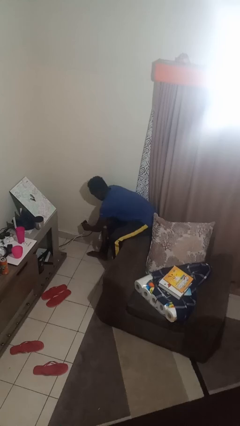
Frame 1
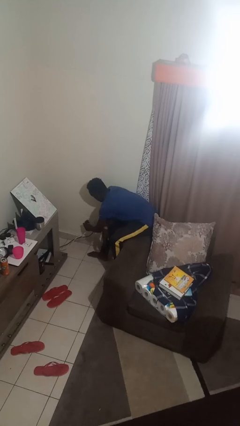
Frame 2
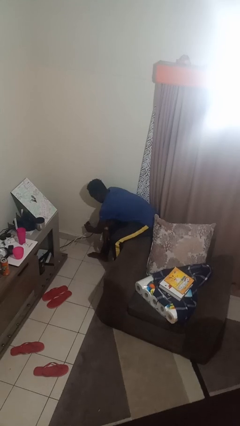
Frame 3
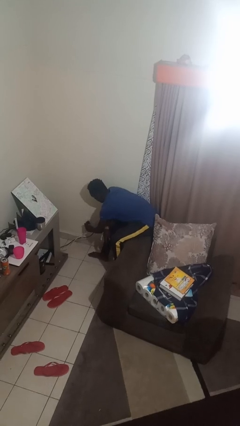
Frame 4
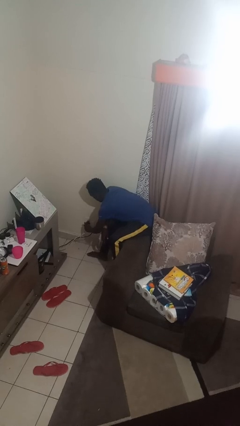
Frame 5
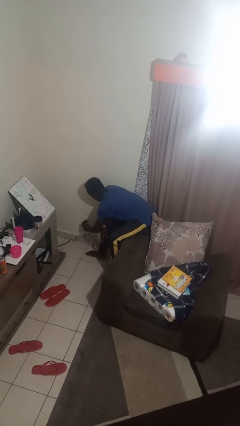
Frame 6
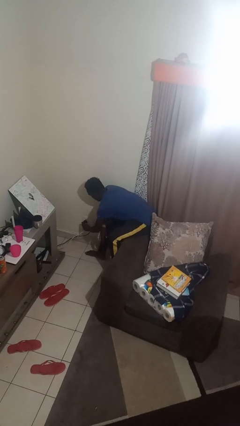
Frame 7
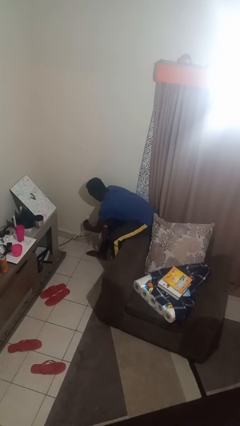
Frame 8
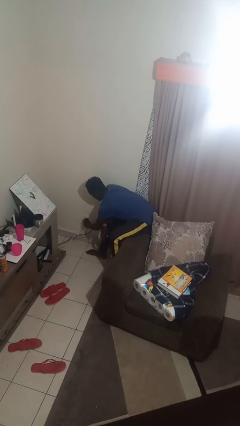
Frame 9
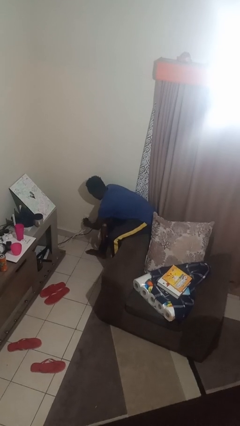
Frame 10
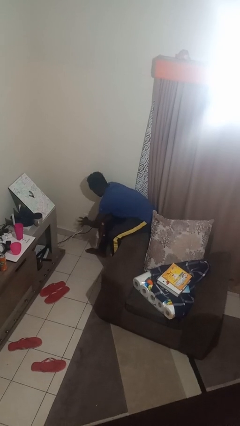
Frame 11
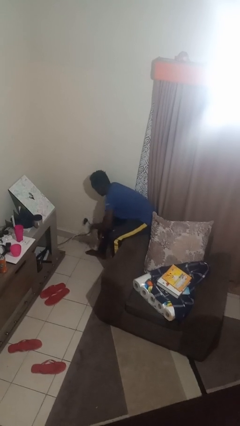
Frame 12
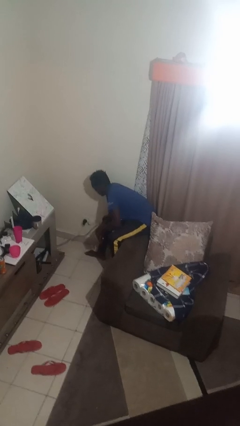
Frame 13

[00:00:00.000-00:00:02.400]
person plugs into electrical socket

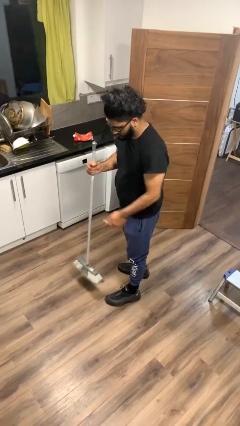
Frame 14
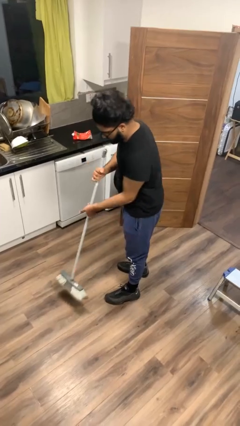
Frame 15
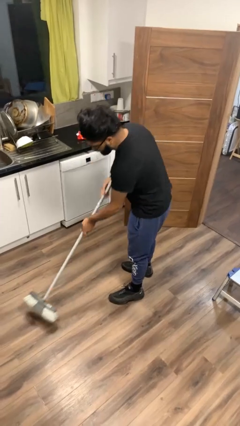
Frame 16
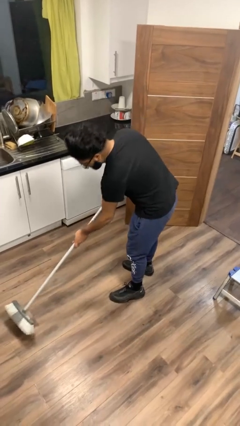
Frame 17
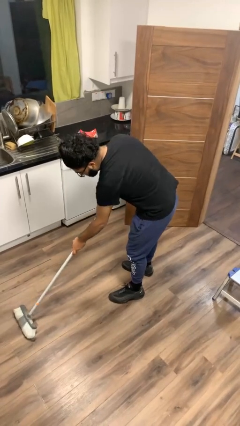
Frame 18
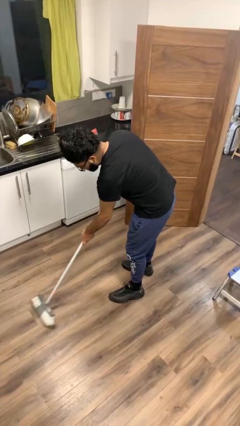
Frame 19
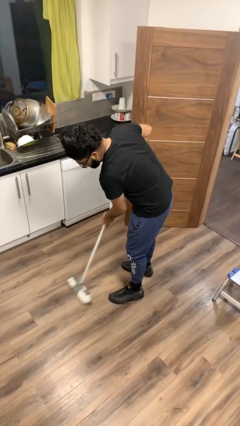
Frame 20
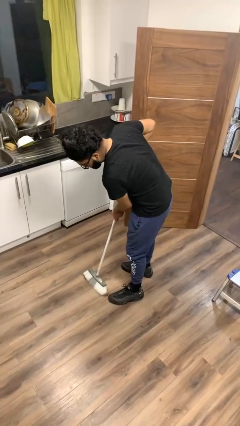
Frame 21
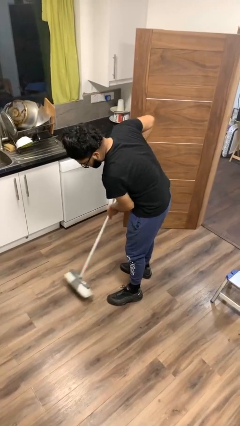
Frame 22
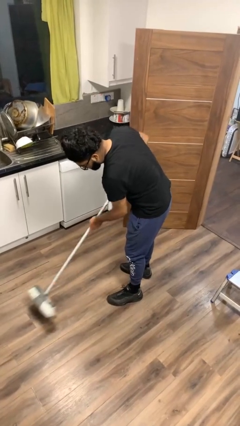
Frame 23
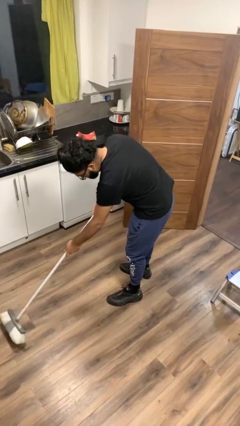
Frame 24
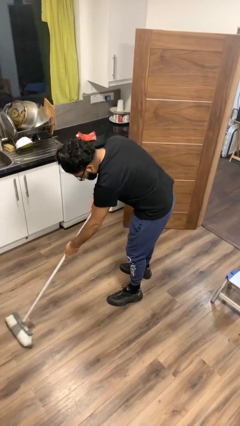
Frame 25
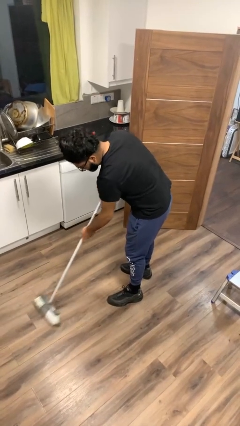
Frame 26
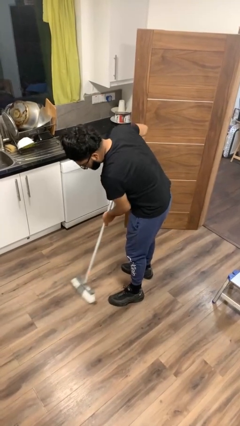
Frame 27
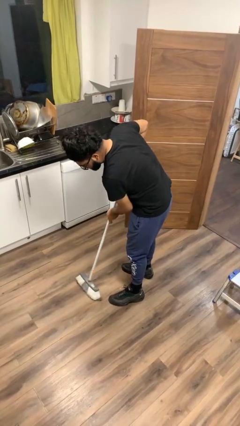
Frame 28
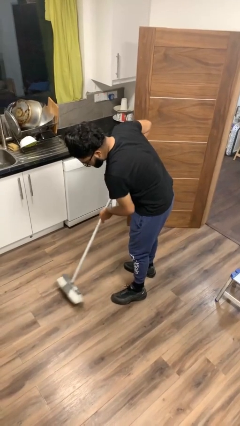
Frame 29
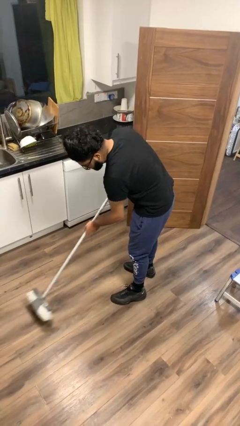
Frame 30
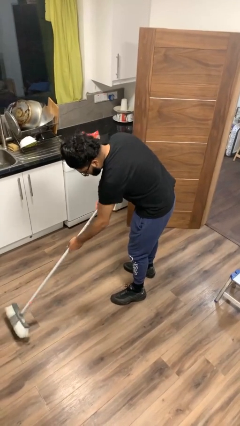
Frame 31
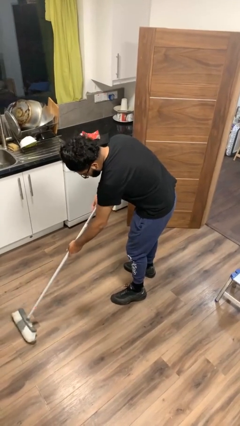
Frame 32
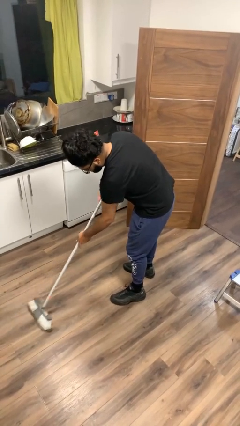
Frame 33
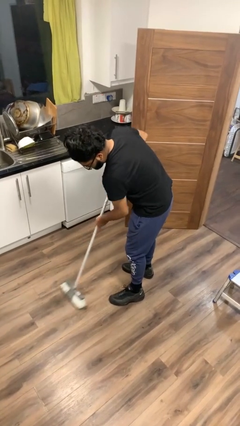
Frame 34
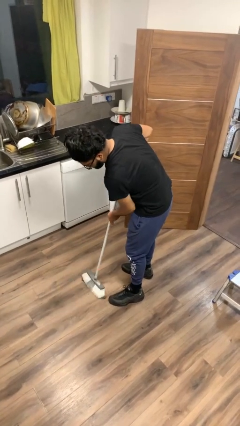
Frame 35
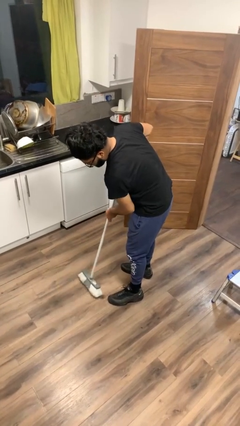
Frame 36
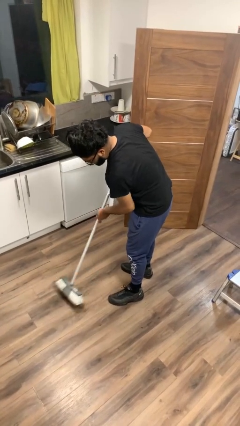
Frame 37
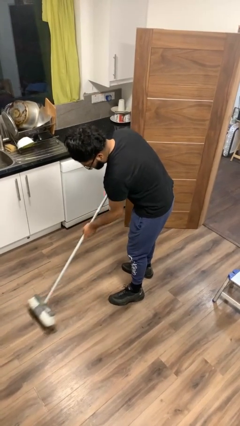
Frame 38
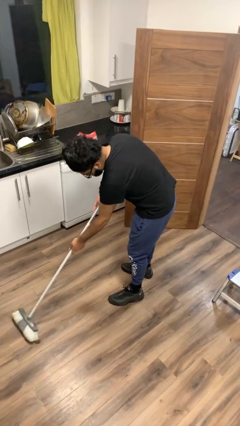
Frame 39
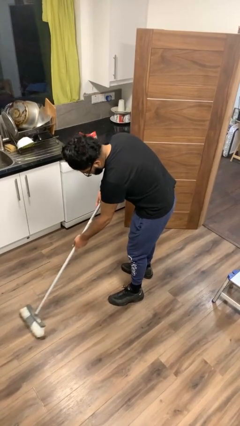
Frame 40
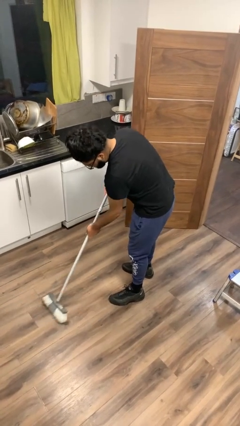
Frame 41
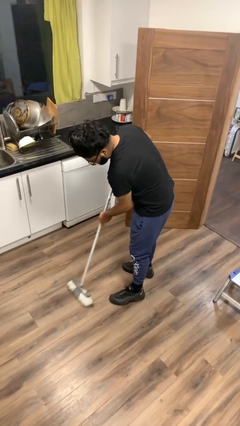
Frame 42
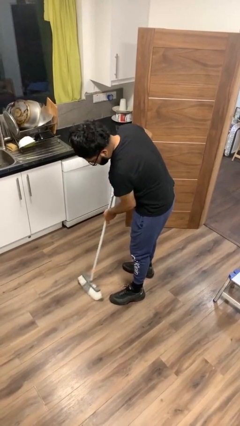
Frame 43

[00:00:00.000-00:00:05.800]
person sweeps floor

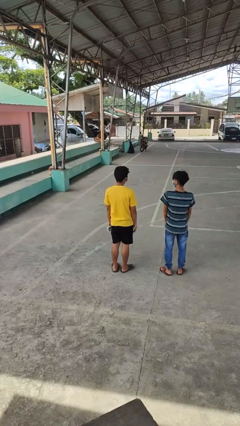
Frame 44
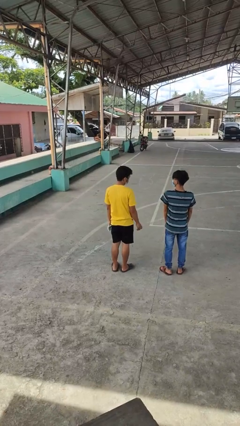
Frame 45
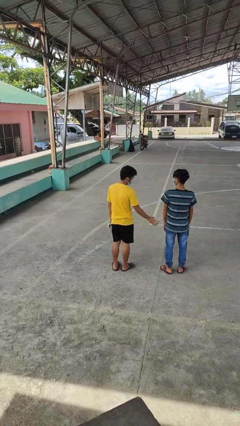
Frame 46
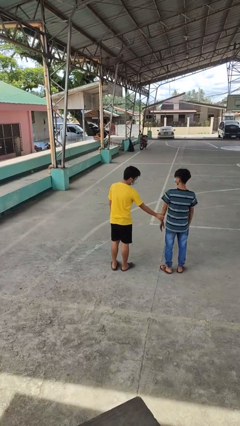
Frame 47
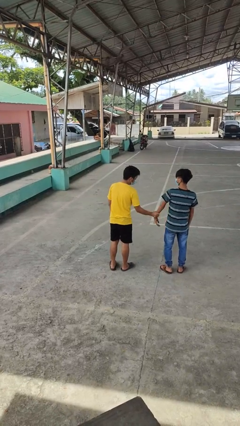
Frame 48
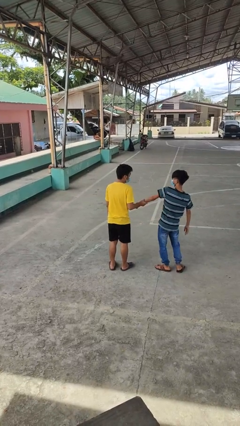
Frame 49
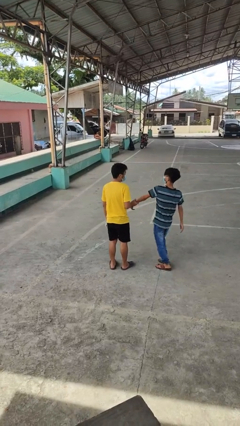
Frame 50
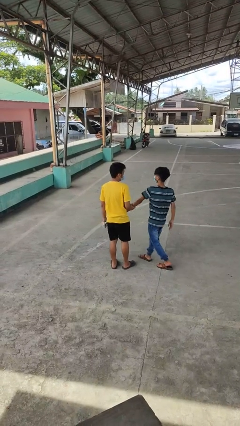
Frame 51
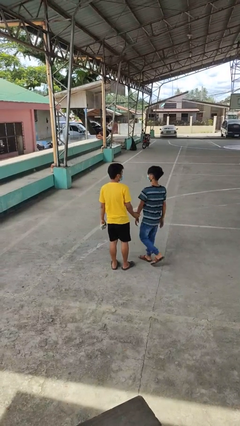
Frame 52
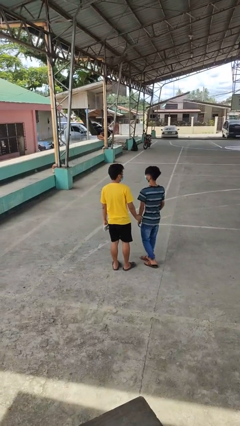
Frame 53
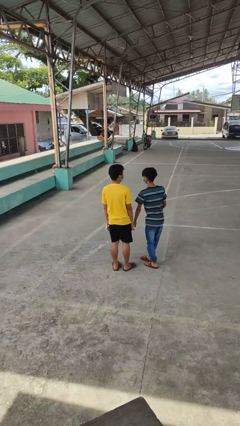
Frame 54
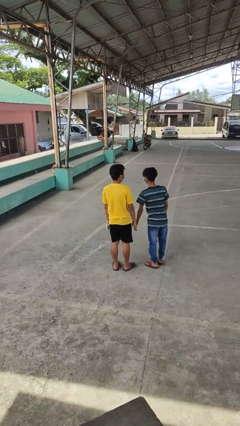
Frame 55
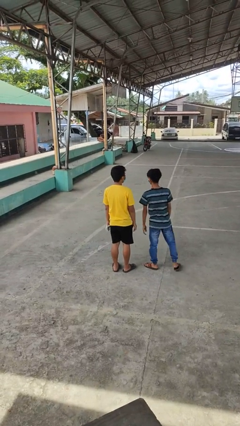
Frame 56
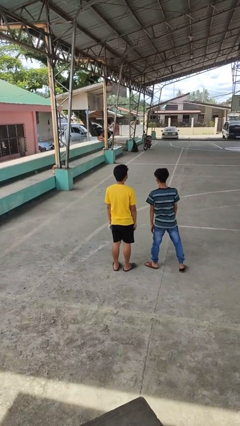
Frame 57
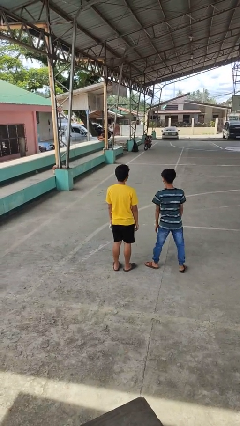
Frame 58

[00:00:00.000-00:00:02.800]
person grabs person by forearm

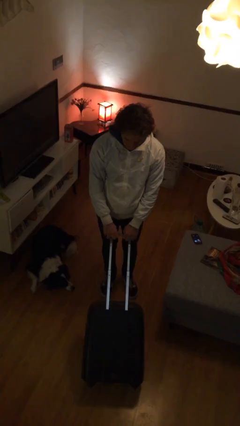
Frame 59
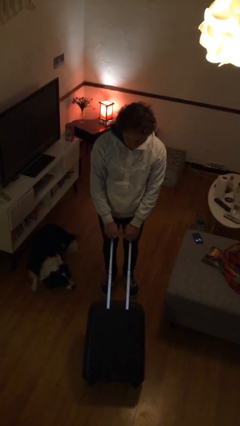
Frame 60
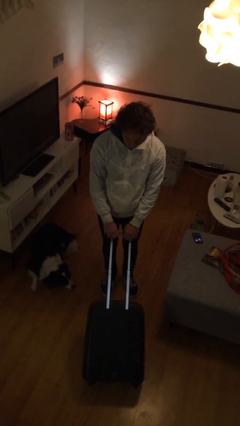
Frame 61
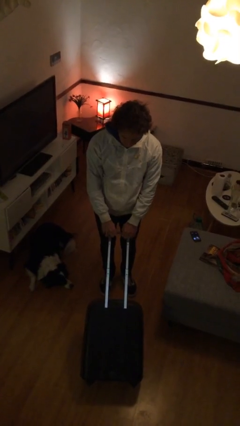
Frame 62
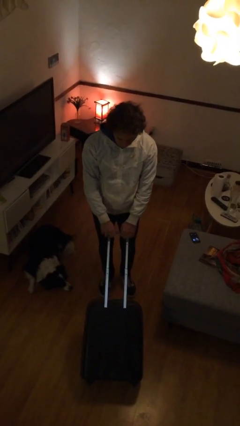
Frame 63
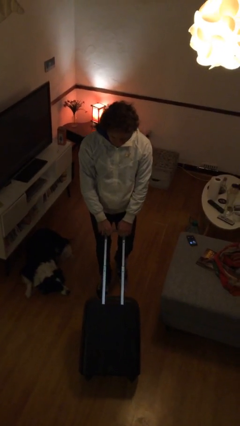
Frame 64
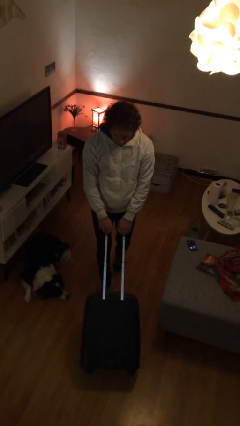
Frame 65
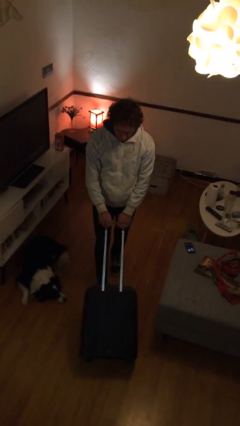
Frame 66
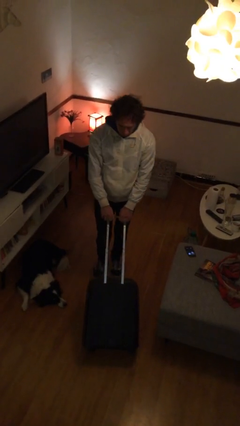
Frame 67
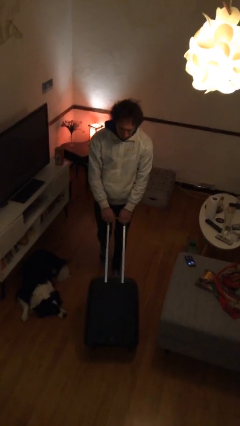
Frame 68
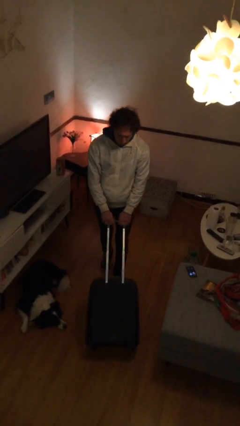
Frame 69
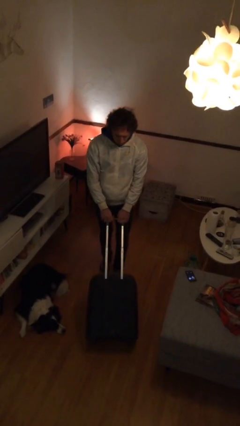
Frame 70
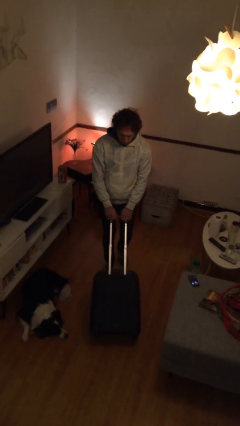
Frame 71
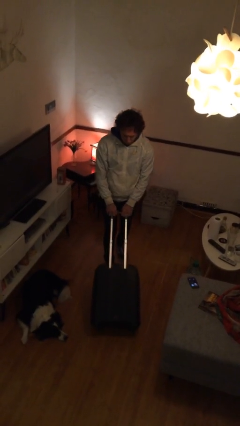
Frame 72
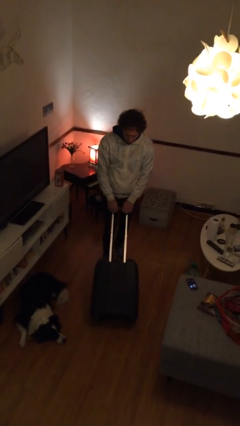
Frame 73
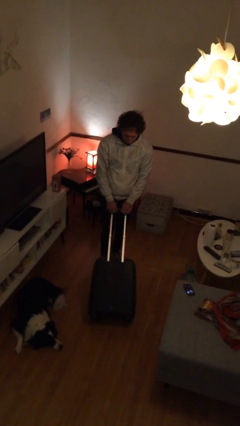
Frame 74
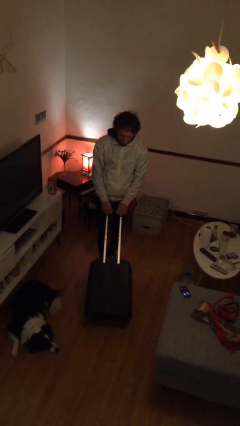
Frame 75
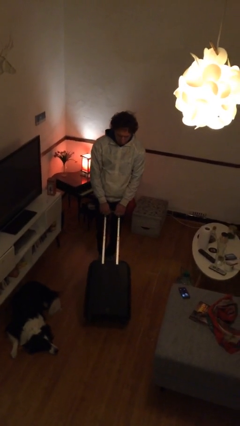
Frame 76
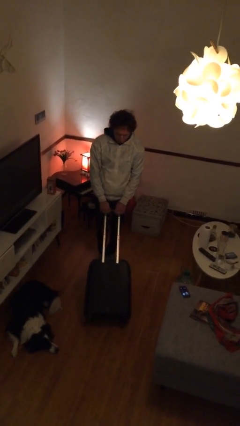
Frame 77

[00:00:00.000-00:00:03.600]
person pulls wheeled cart

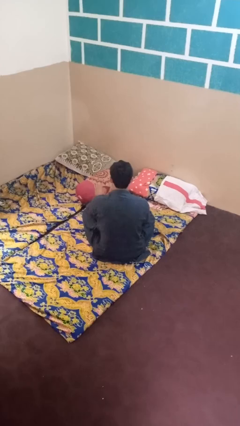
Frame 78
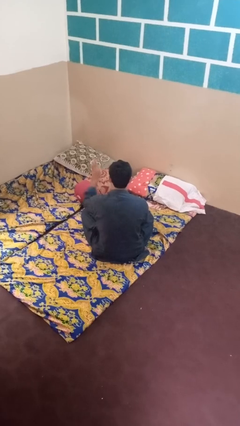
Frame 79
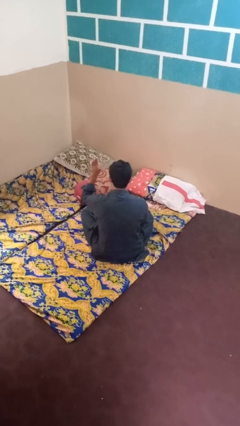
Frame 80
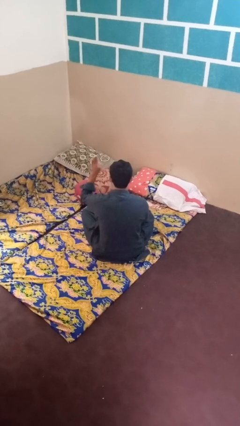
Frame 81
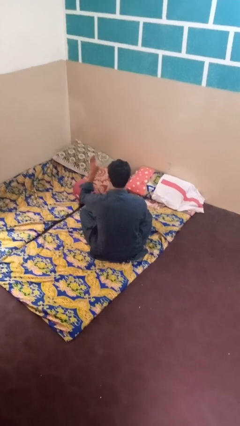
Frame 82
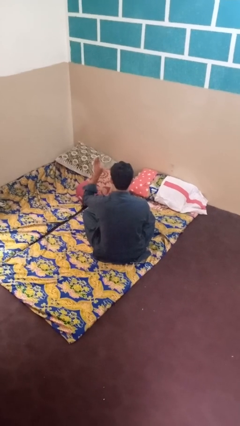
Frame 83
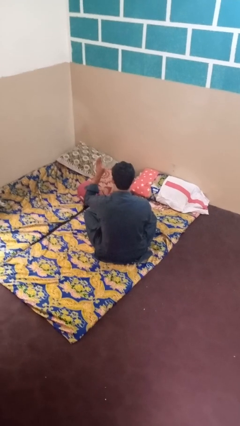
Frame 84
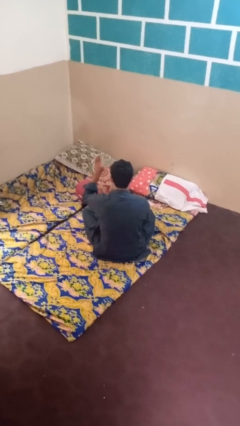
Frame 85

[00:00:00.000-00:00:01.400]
person gestures number three

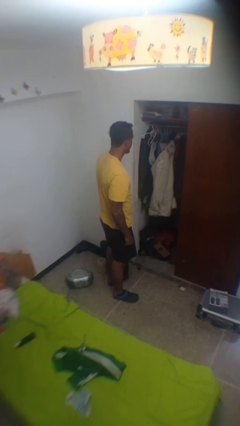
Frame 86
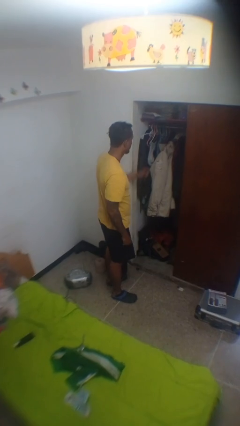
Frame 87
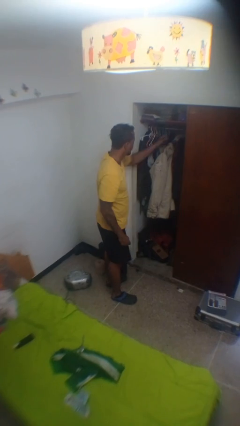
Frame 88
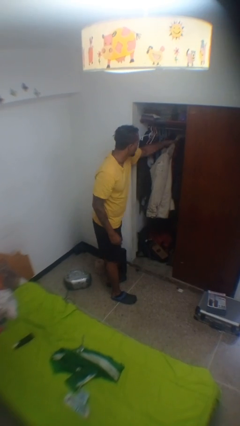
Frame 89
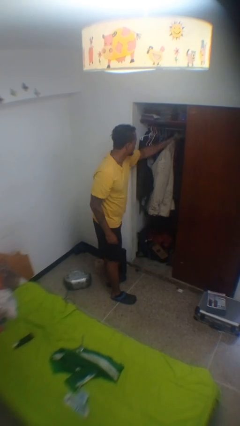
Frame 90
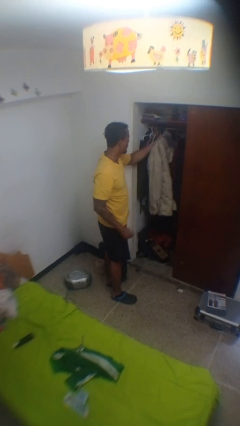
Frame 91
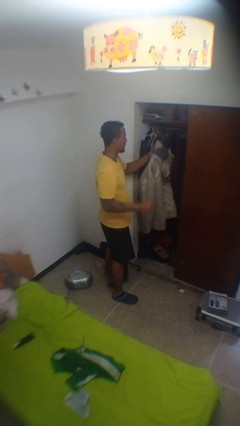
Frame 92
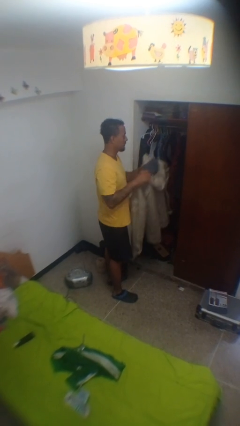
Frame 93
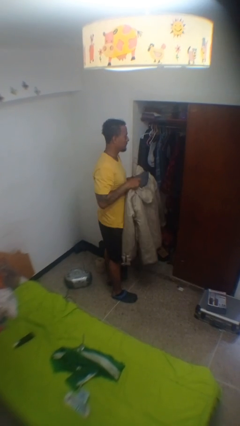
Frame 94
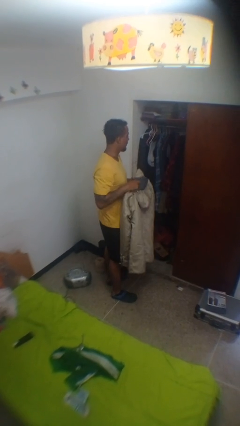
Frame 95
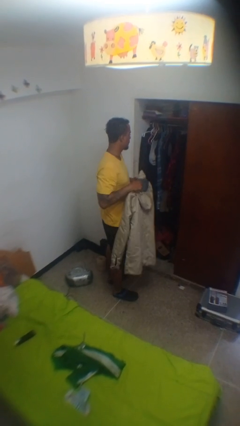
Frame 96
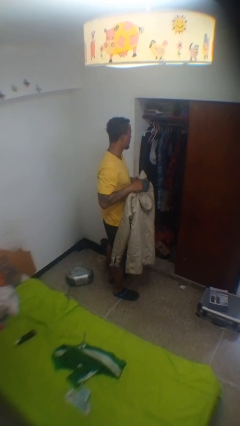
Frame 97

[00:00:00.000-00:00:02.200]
person takes clothes from closet
